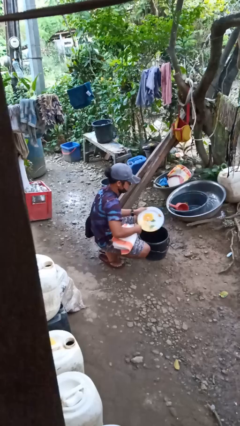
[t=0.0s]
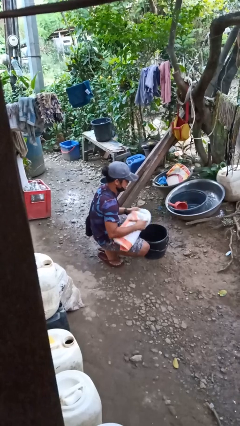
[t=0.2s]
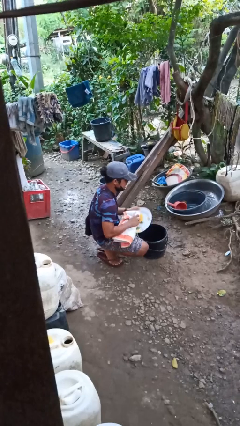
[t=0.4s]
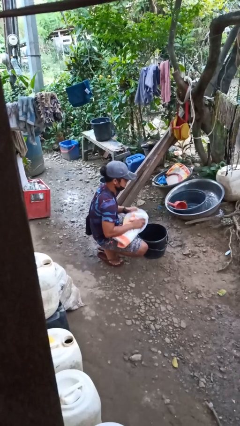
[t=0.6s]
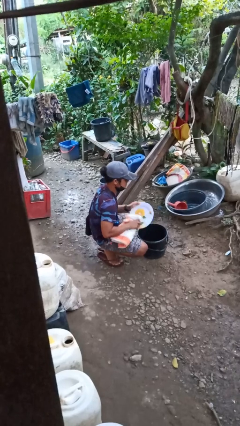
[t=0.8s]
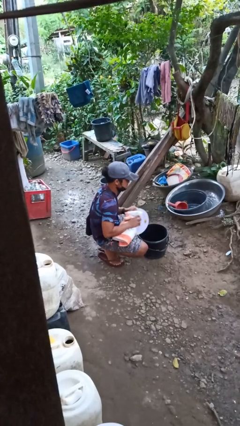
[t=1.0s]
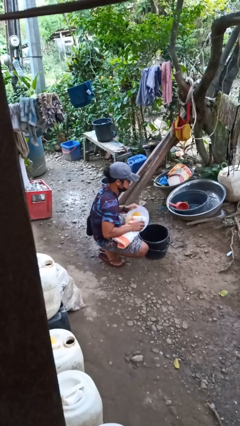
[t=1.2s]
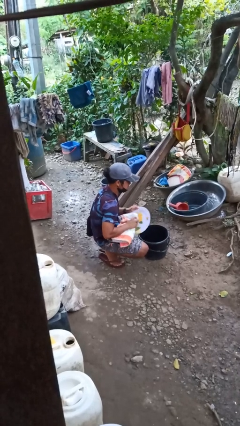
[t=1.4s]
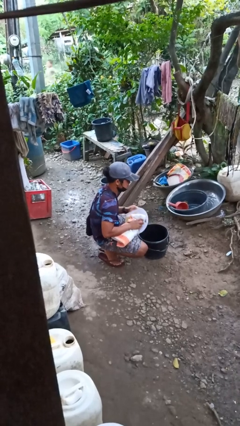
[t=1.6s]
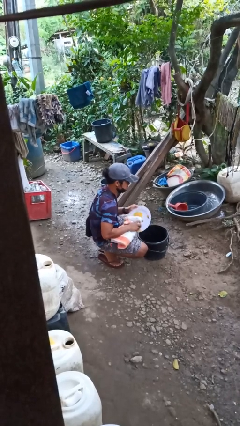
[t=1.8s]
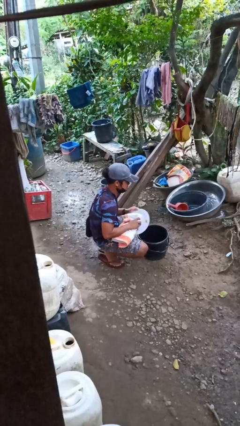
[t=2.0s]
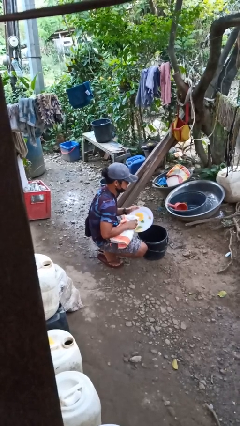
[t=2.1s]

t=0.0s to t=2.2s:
person dries dish

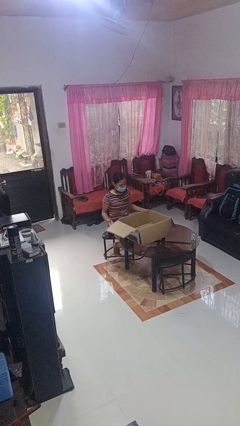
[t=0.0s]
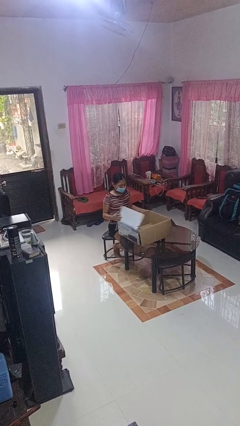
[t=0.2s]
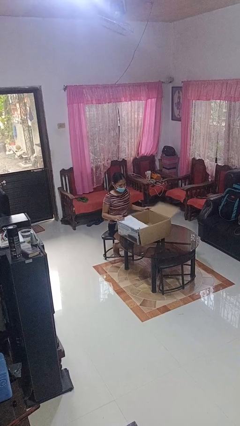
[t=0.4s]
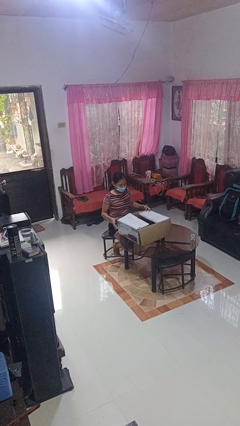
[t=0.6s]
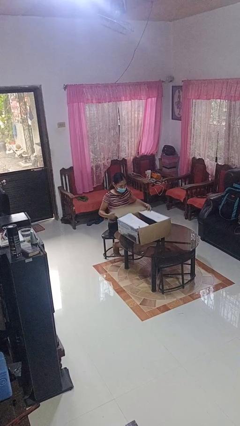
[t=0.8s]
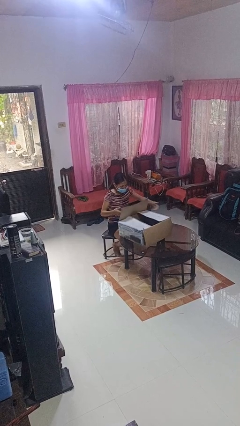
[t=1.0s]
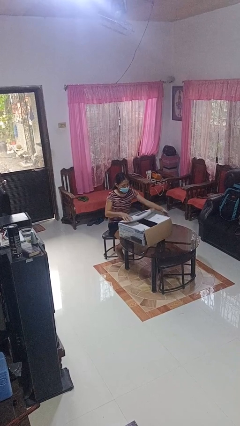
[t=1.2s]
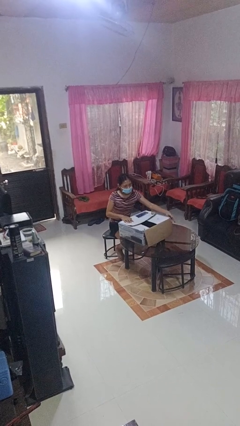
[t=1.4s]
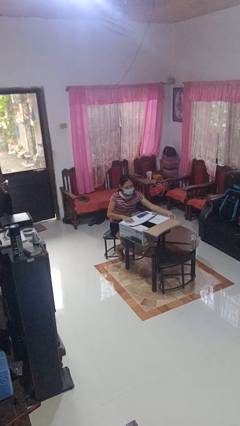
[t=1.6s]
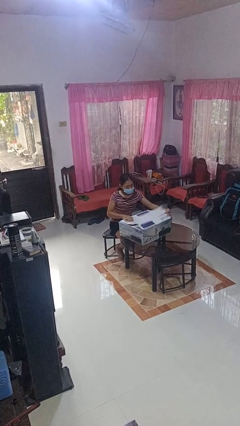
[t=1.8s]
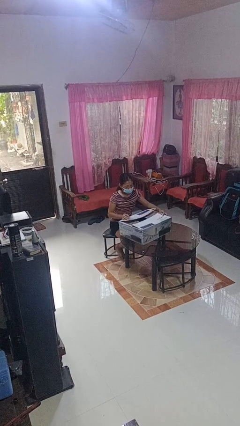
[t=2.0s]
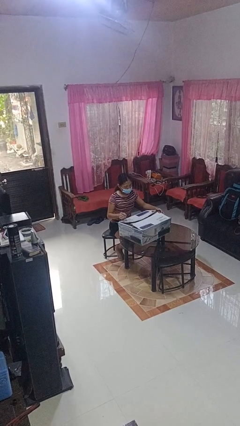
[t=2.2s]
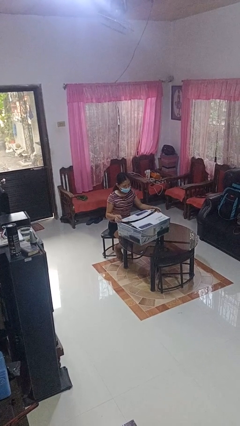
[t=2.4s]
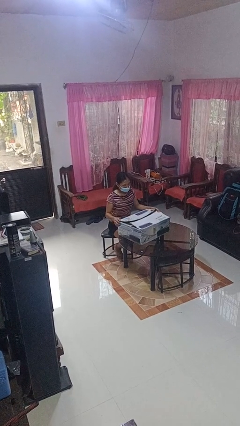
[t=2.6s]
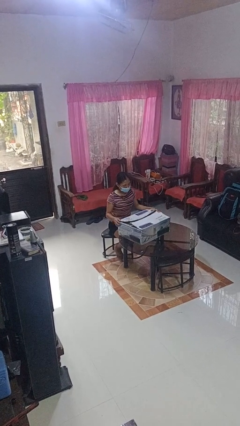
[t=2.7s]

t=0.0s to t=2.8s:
person closes box

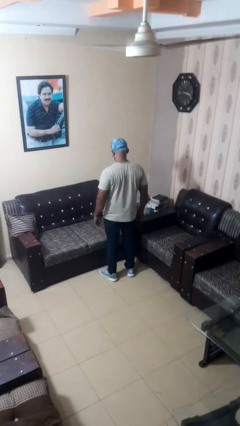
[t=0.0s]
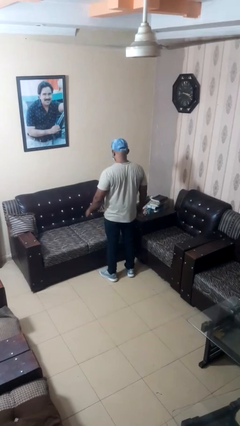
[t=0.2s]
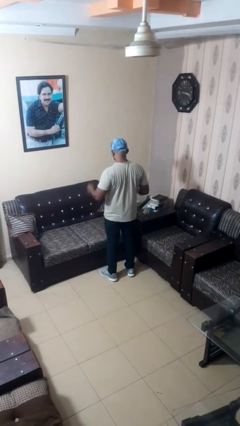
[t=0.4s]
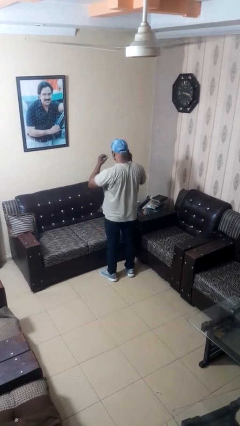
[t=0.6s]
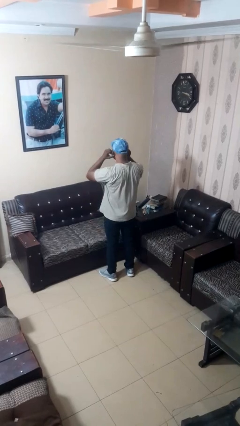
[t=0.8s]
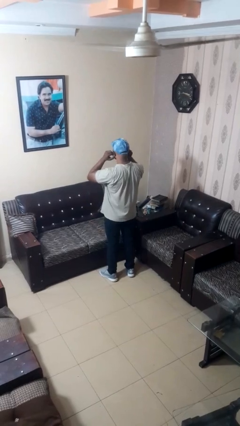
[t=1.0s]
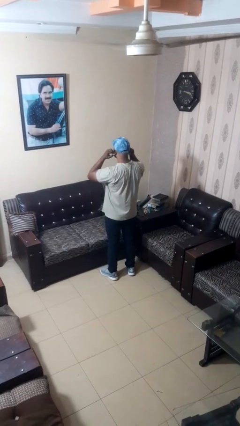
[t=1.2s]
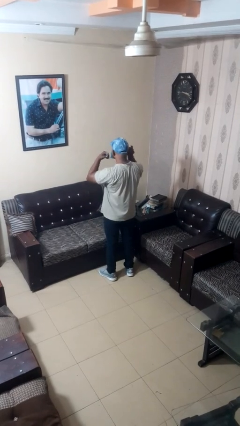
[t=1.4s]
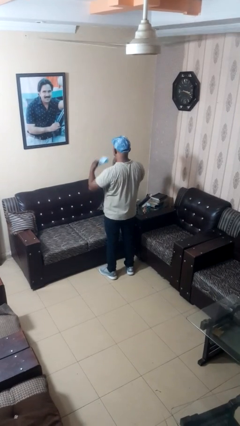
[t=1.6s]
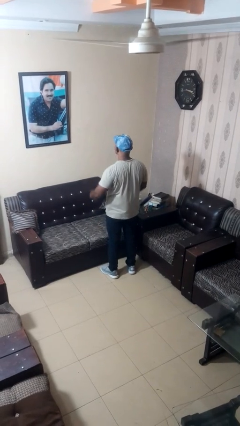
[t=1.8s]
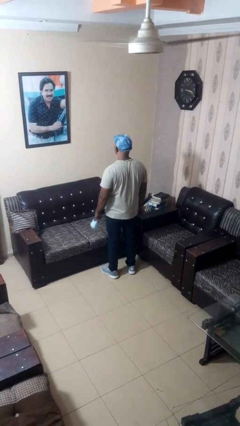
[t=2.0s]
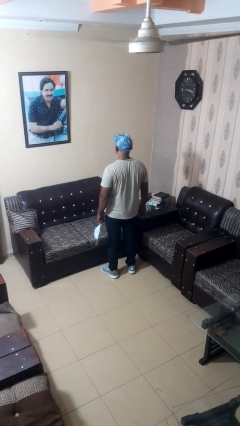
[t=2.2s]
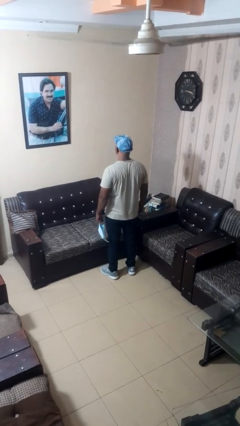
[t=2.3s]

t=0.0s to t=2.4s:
person takes off facemask

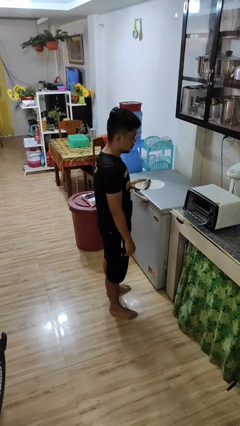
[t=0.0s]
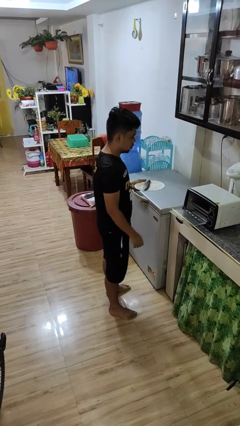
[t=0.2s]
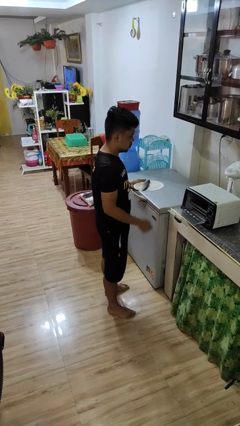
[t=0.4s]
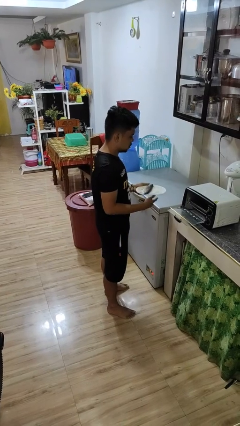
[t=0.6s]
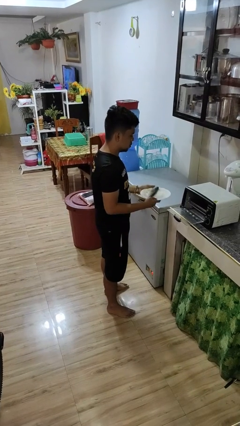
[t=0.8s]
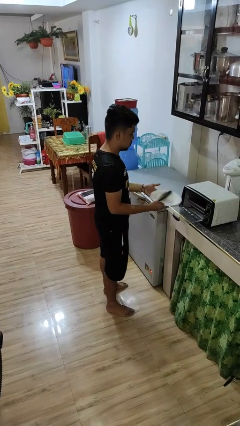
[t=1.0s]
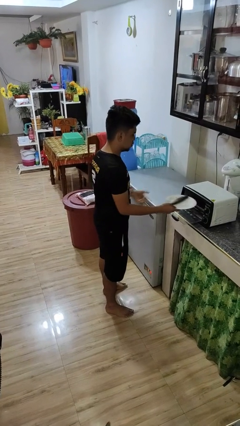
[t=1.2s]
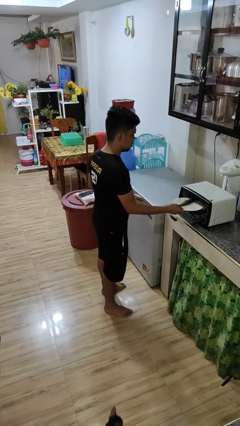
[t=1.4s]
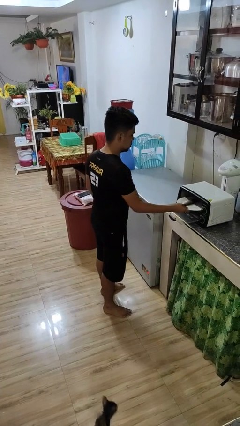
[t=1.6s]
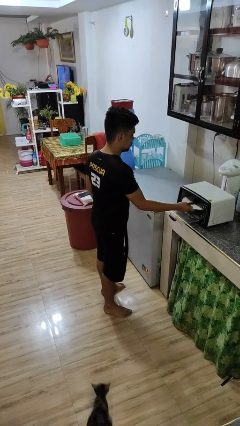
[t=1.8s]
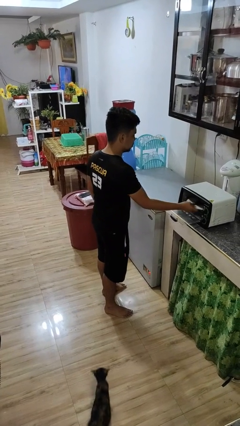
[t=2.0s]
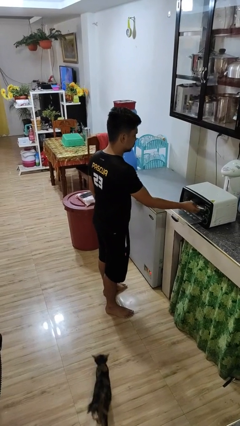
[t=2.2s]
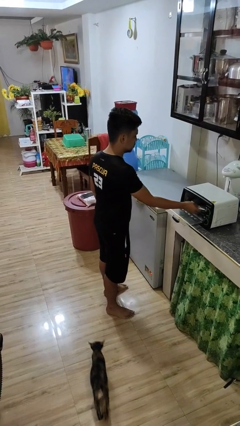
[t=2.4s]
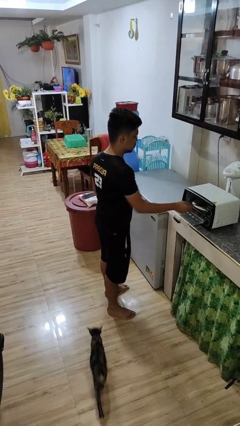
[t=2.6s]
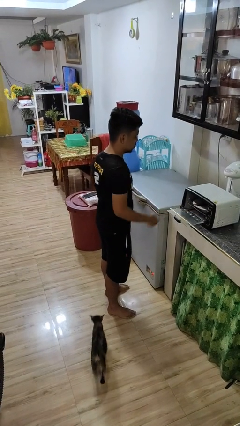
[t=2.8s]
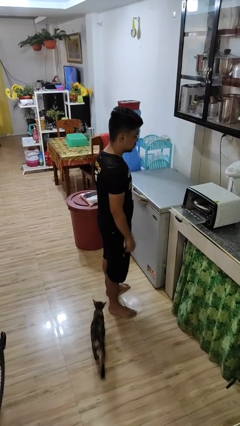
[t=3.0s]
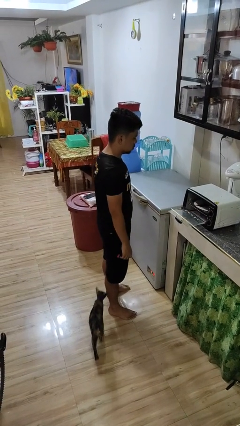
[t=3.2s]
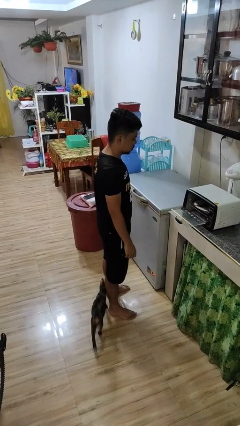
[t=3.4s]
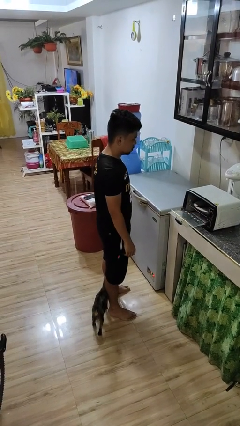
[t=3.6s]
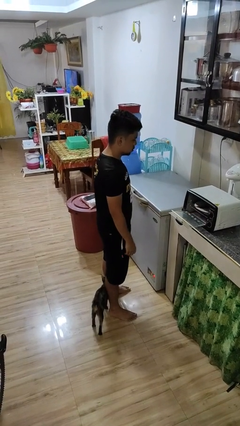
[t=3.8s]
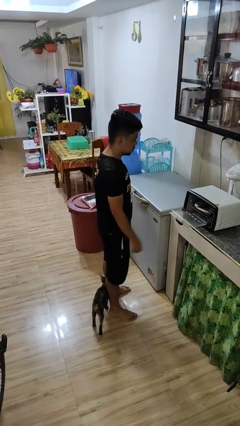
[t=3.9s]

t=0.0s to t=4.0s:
person puts object into microwave

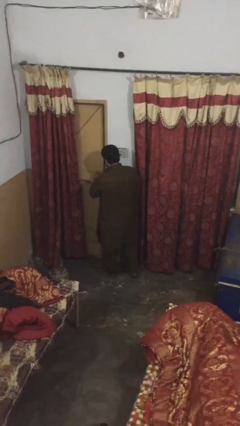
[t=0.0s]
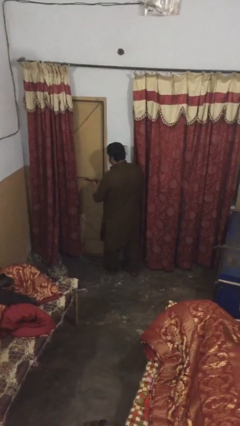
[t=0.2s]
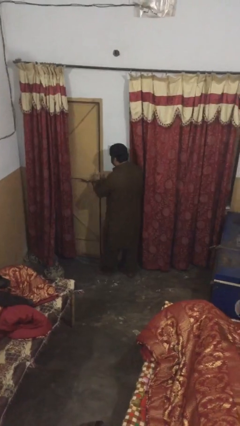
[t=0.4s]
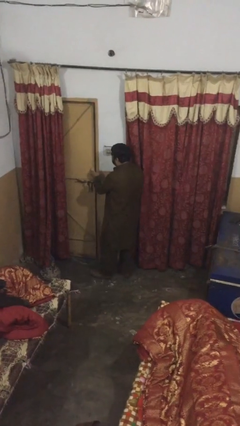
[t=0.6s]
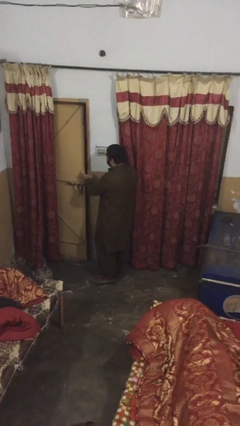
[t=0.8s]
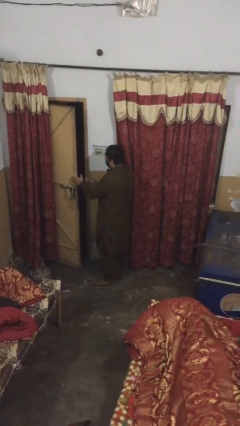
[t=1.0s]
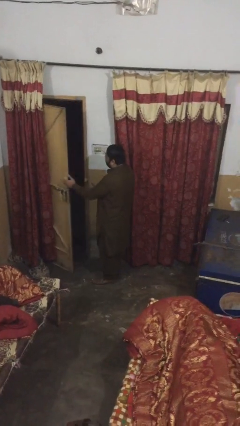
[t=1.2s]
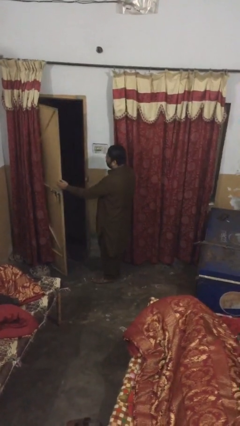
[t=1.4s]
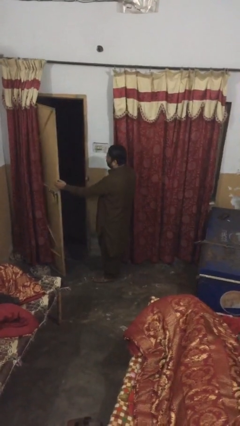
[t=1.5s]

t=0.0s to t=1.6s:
person opens facility door

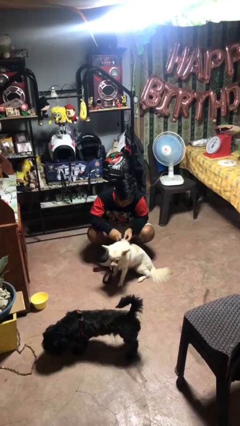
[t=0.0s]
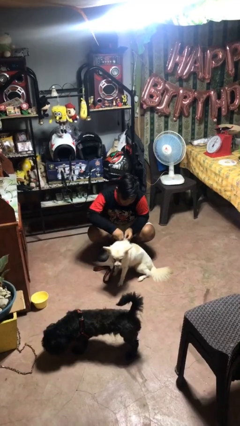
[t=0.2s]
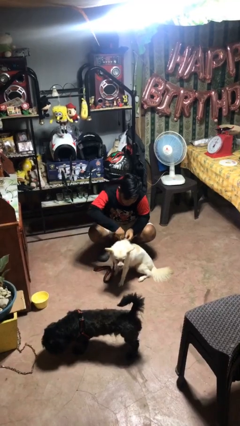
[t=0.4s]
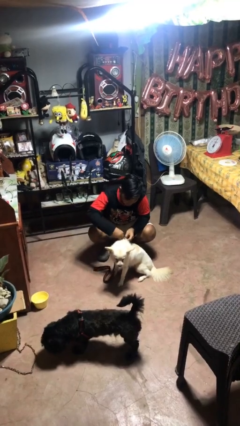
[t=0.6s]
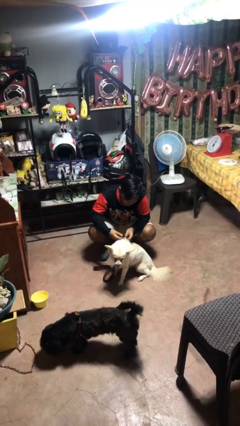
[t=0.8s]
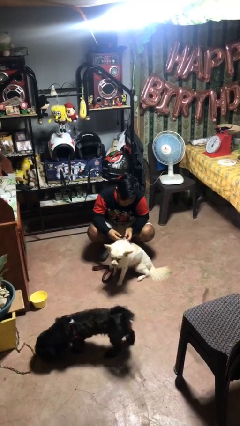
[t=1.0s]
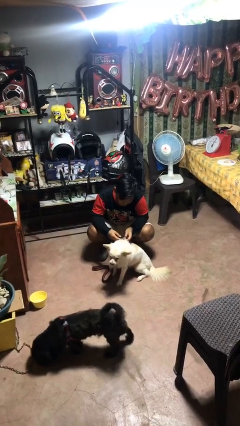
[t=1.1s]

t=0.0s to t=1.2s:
person attaches leash to dog

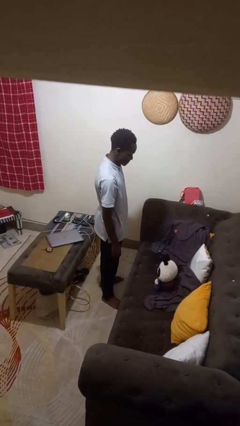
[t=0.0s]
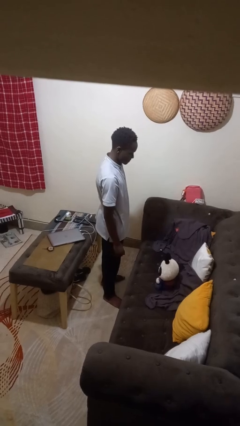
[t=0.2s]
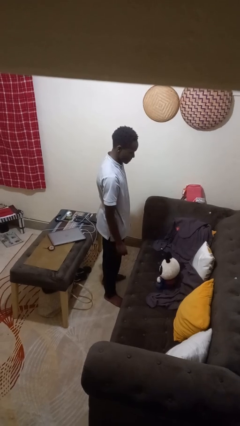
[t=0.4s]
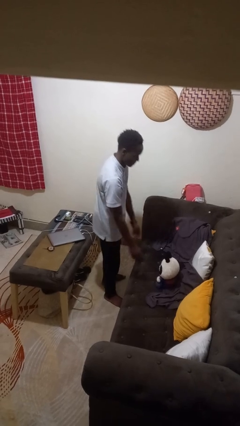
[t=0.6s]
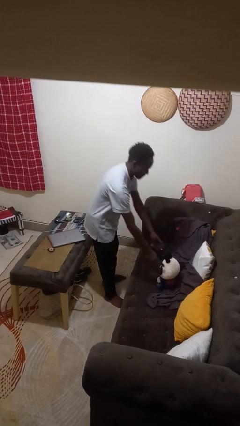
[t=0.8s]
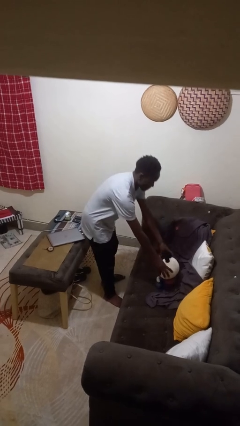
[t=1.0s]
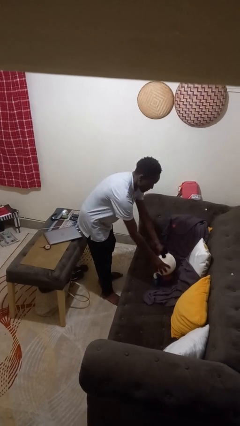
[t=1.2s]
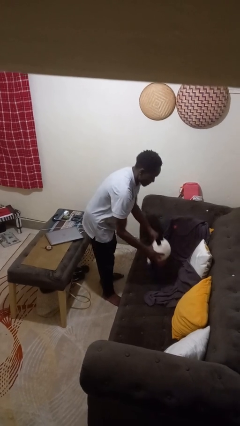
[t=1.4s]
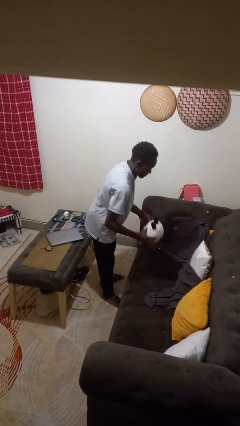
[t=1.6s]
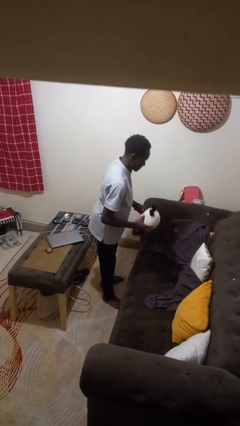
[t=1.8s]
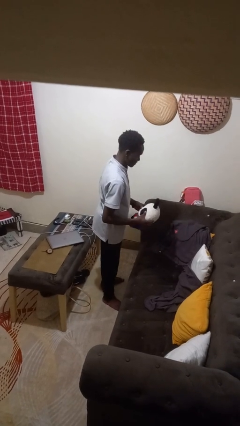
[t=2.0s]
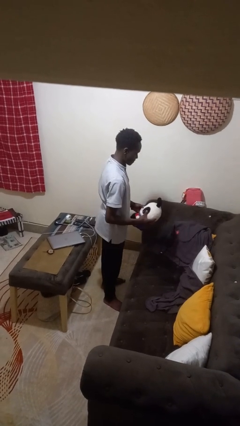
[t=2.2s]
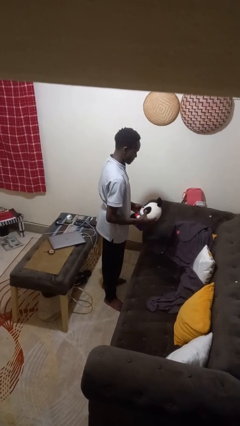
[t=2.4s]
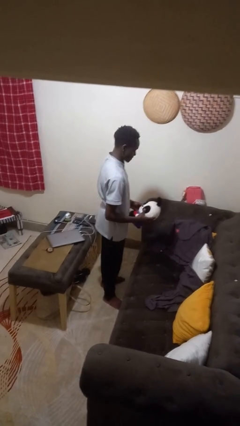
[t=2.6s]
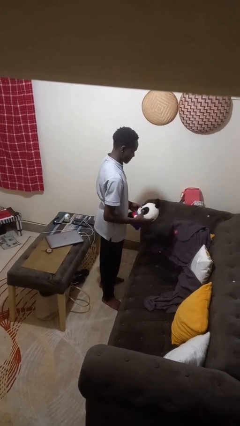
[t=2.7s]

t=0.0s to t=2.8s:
person picks up object from couch
